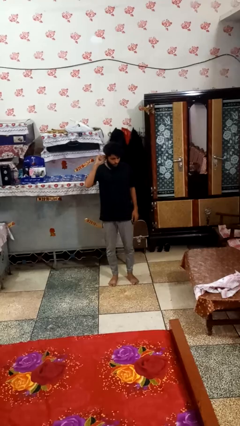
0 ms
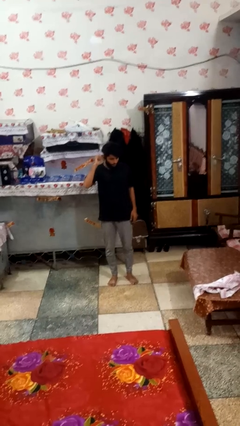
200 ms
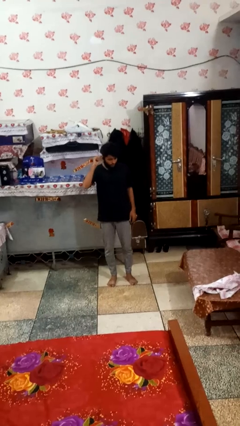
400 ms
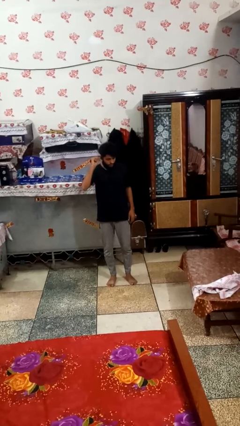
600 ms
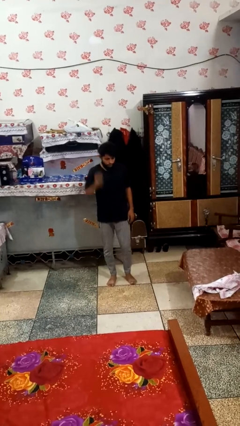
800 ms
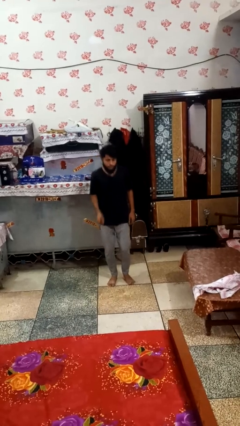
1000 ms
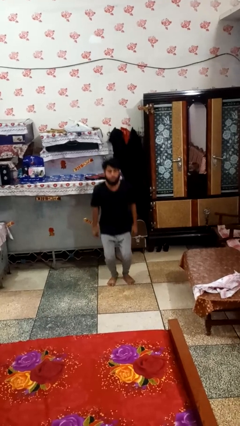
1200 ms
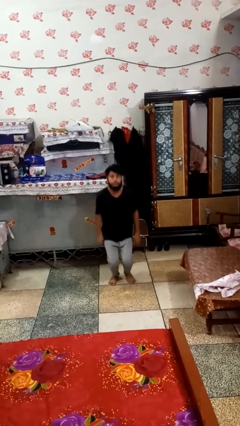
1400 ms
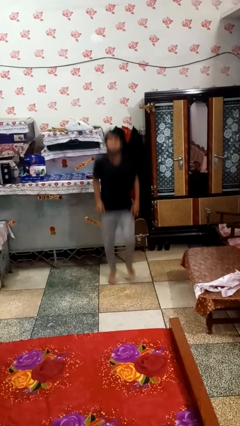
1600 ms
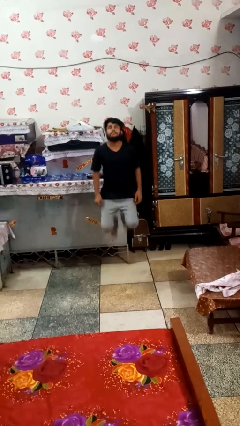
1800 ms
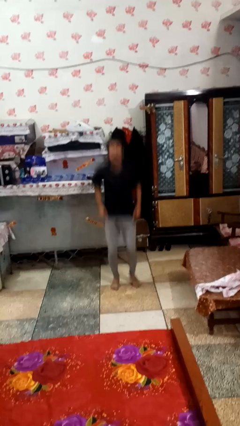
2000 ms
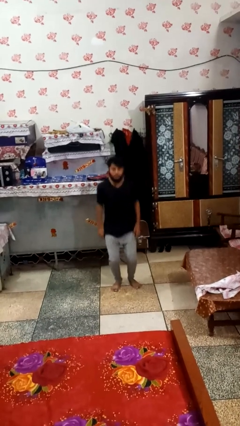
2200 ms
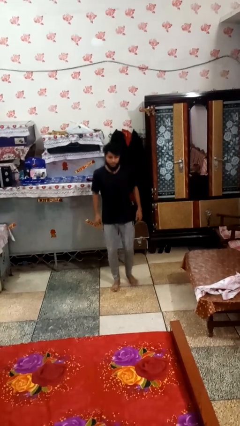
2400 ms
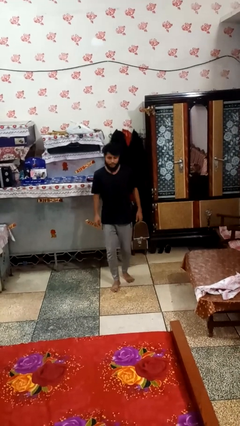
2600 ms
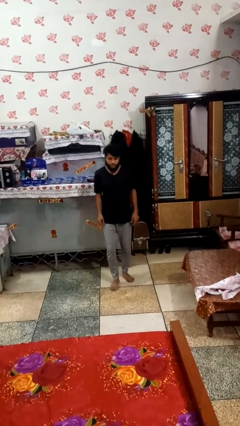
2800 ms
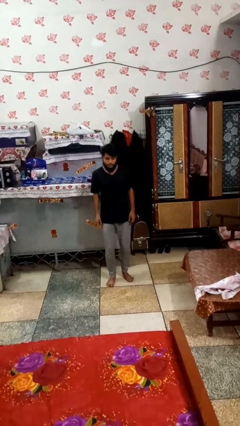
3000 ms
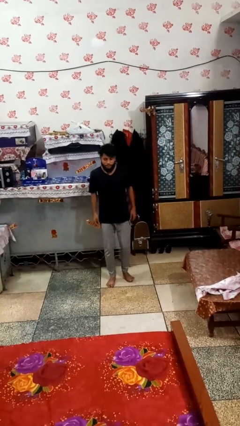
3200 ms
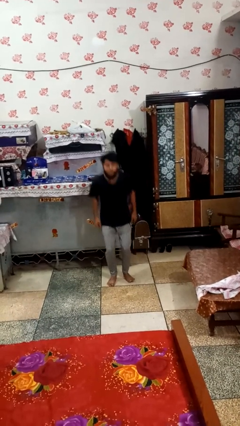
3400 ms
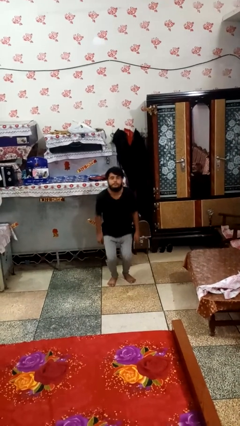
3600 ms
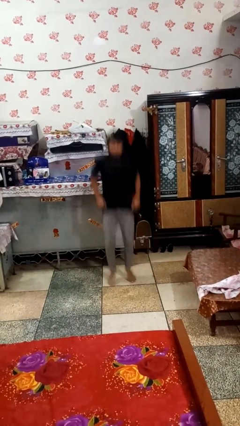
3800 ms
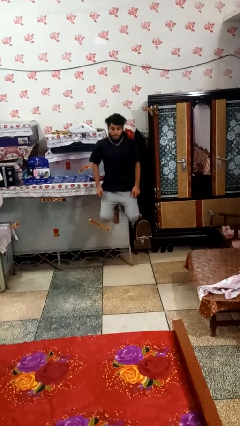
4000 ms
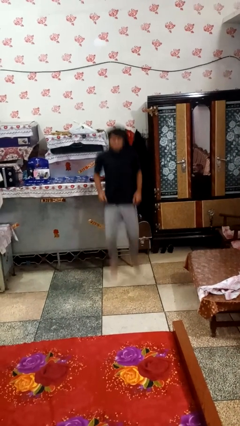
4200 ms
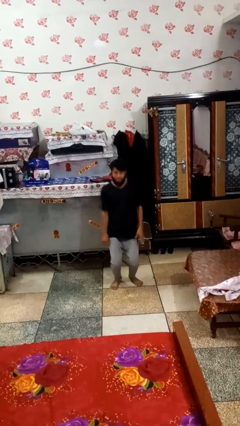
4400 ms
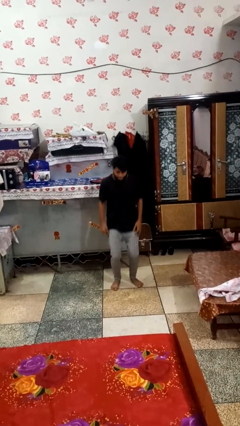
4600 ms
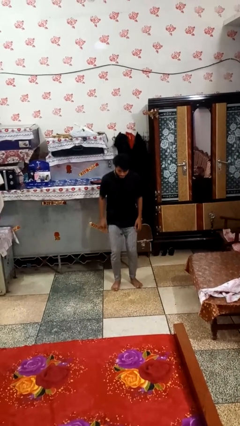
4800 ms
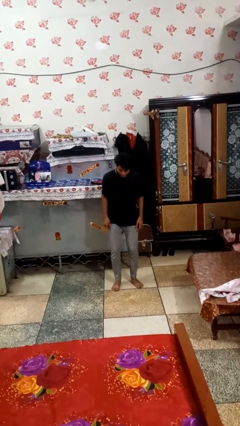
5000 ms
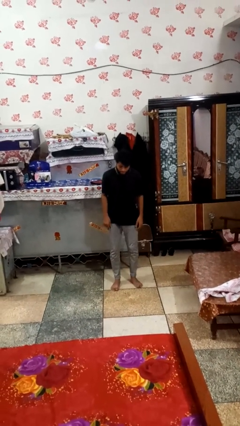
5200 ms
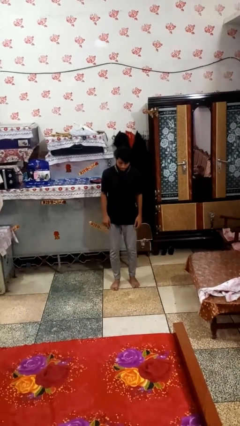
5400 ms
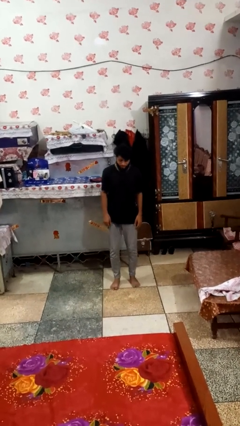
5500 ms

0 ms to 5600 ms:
person jumps

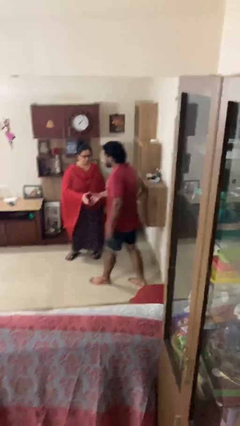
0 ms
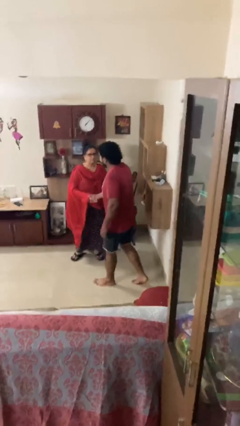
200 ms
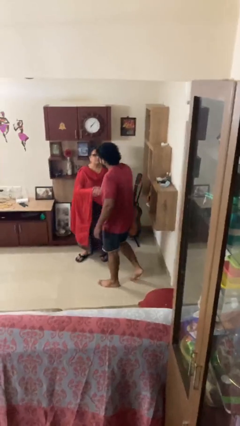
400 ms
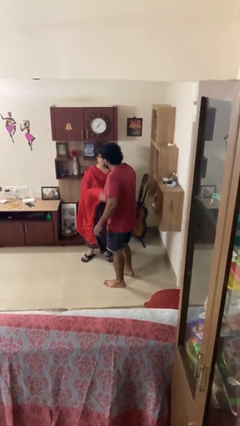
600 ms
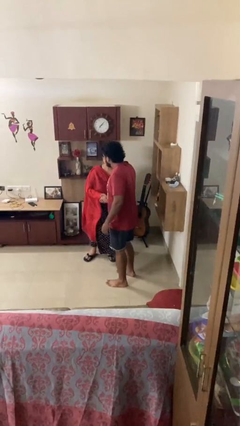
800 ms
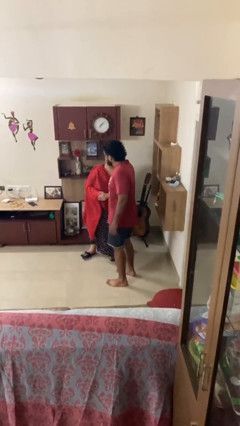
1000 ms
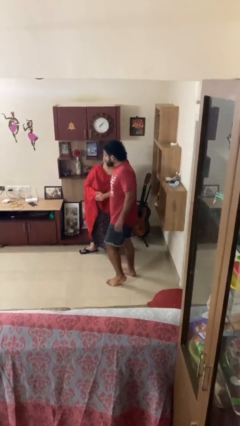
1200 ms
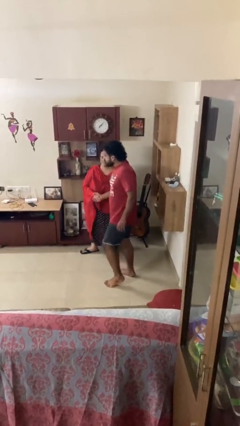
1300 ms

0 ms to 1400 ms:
person shakes hand

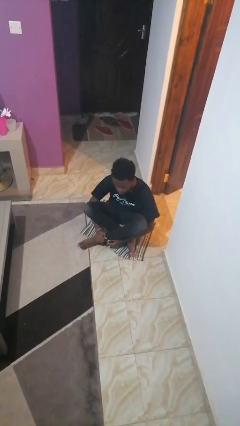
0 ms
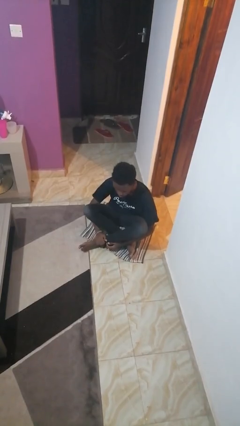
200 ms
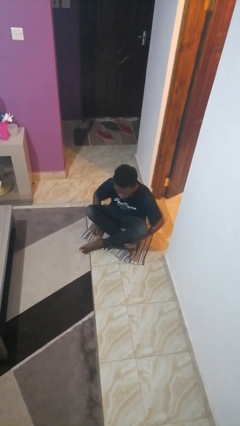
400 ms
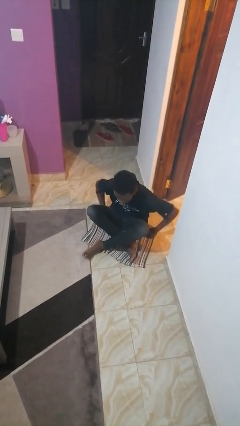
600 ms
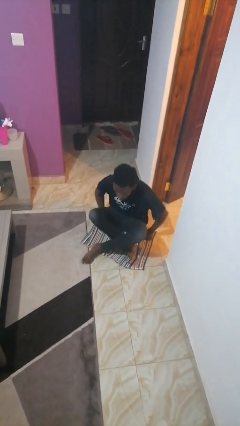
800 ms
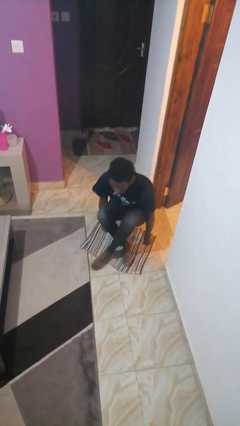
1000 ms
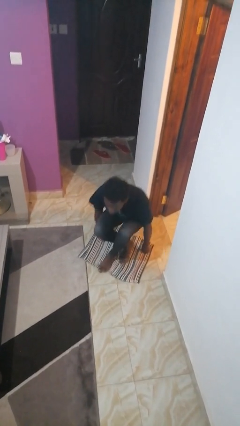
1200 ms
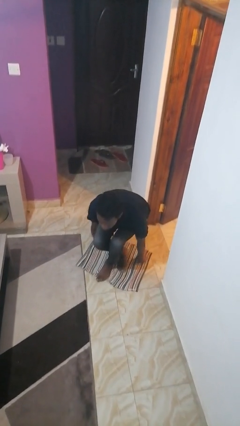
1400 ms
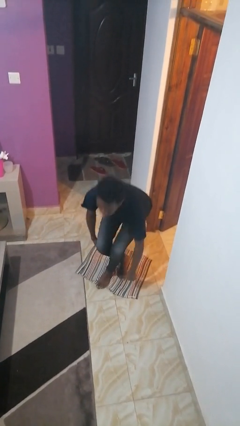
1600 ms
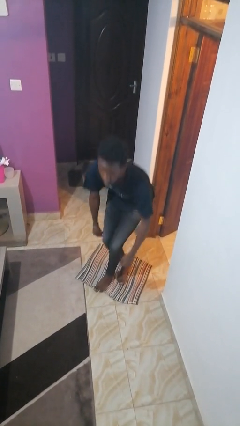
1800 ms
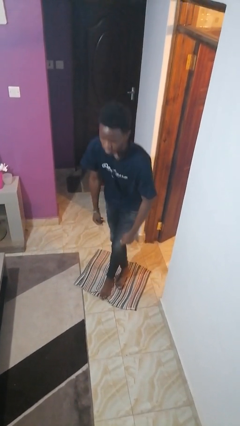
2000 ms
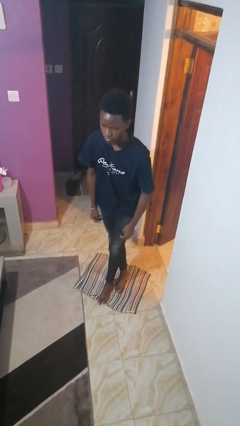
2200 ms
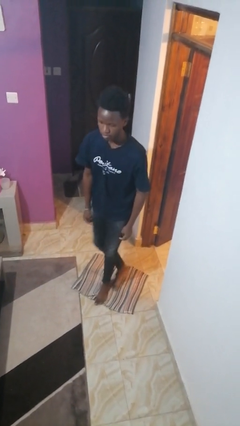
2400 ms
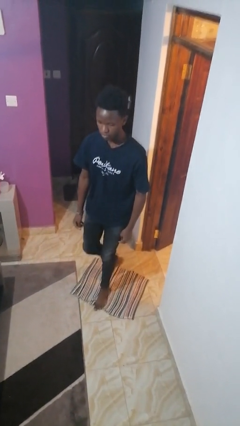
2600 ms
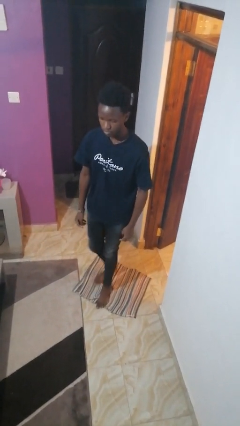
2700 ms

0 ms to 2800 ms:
person stands up from floor

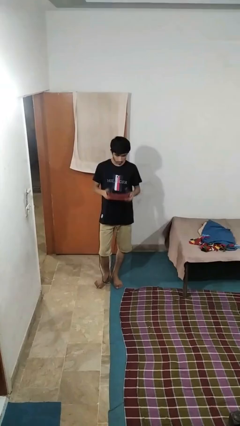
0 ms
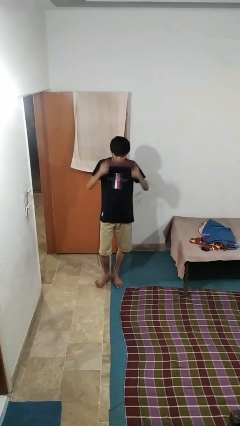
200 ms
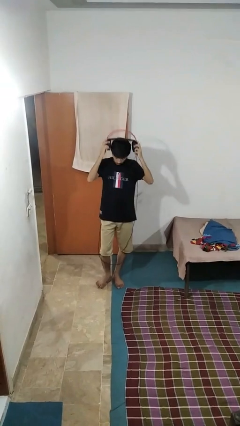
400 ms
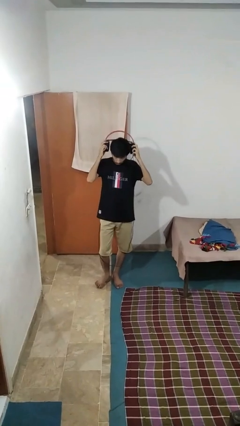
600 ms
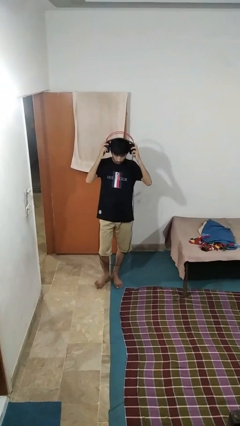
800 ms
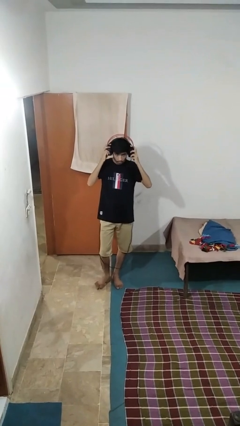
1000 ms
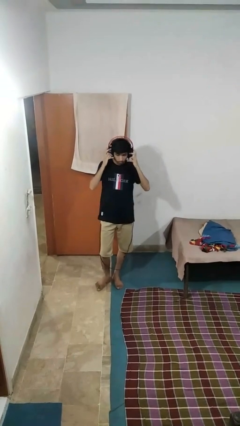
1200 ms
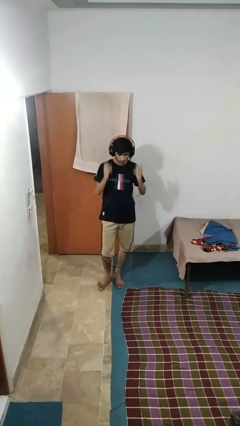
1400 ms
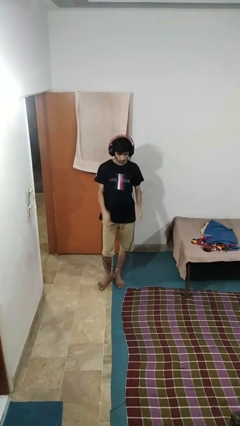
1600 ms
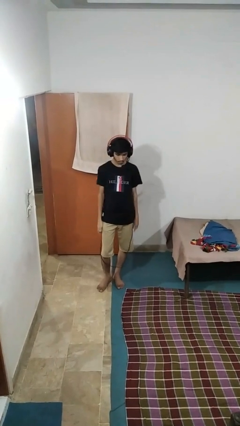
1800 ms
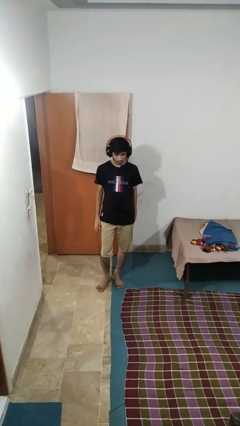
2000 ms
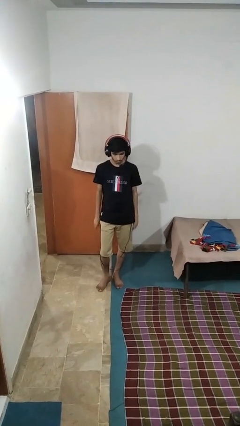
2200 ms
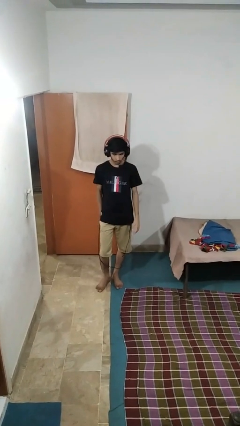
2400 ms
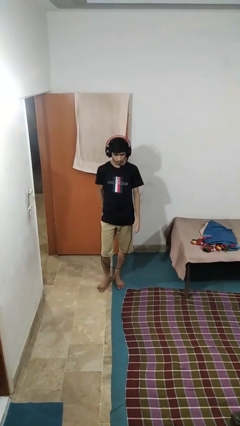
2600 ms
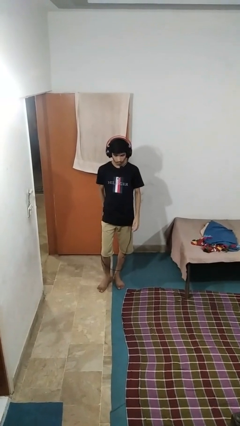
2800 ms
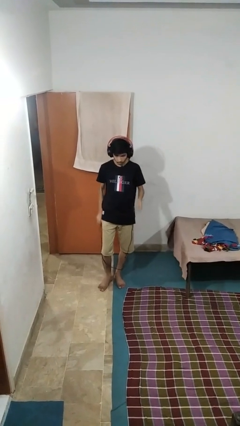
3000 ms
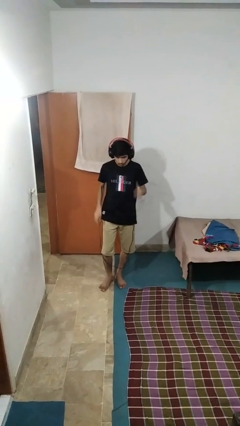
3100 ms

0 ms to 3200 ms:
person puts on headphones

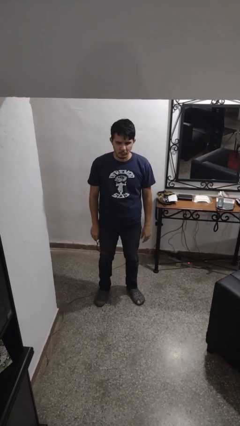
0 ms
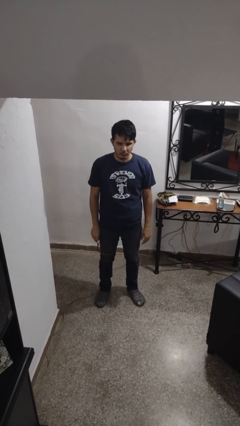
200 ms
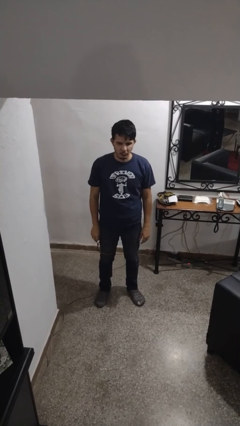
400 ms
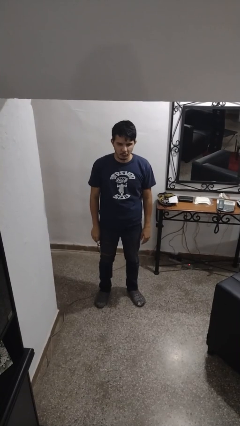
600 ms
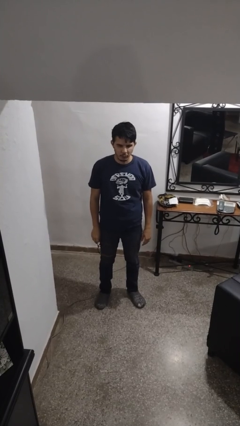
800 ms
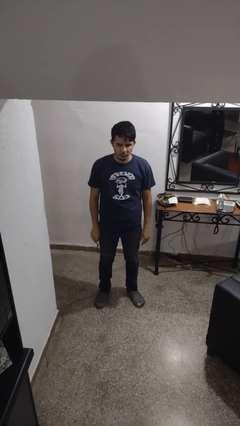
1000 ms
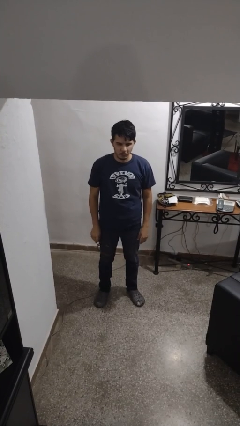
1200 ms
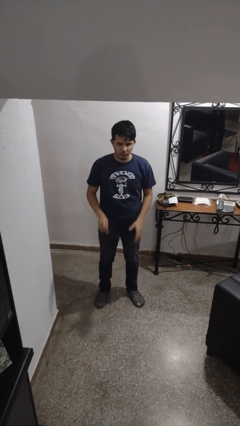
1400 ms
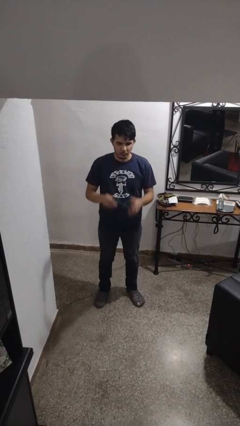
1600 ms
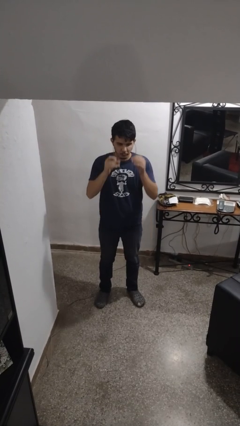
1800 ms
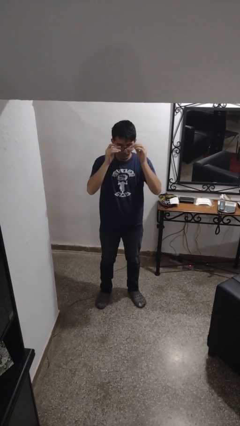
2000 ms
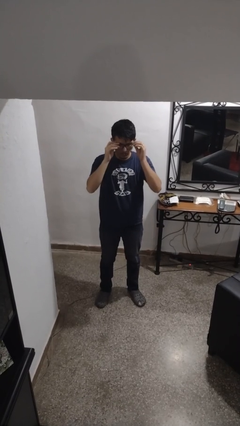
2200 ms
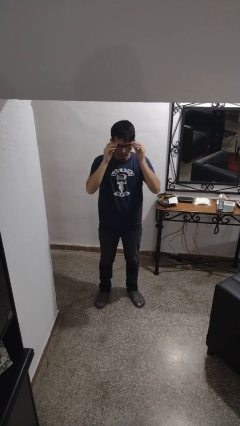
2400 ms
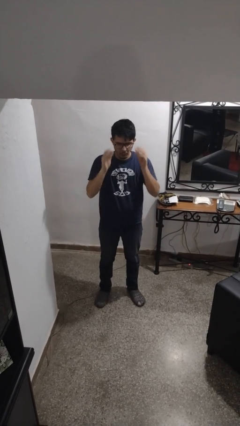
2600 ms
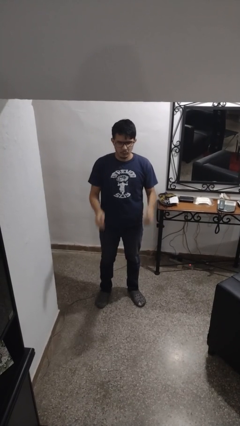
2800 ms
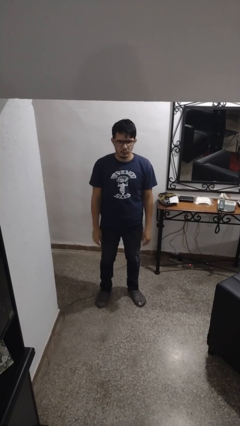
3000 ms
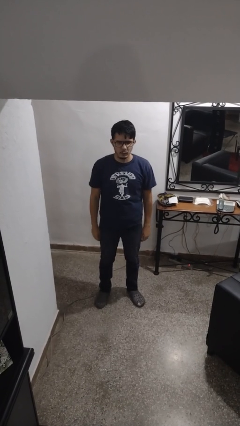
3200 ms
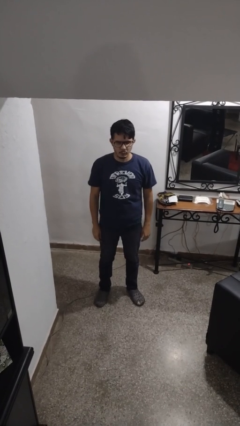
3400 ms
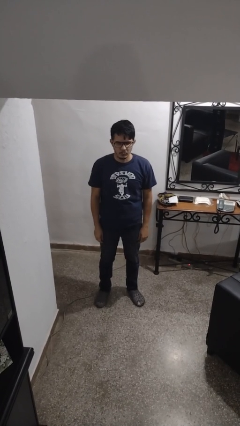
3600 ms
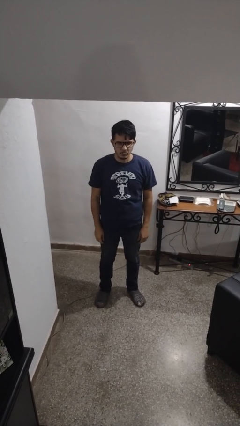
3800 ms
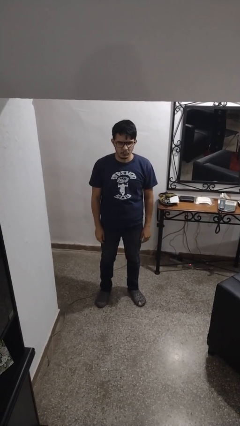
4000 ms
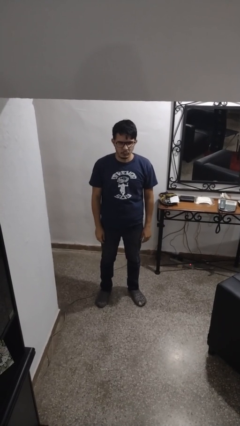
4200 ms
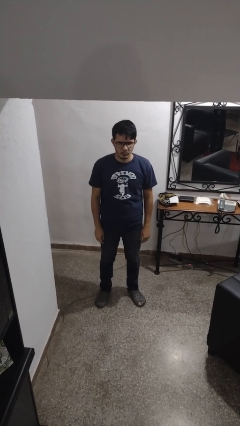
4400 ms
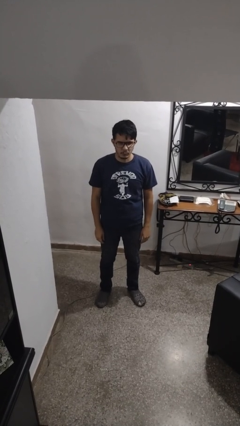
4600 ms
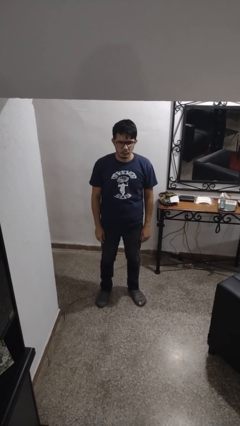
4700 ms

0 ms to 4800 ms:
person puts on glasses
